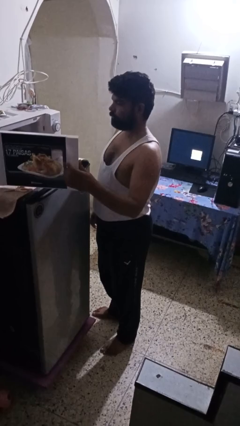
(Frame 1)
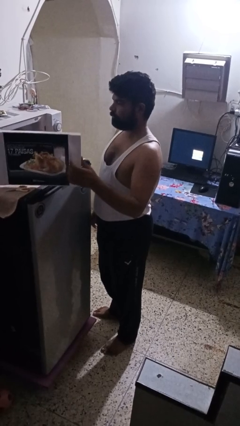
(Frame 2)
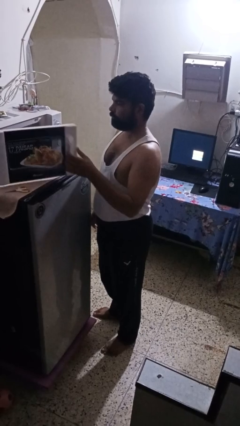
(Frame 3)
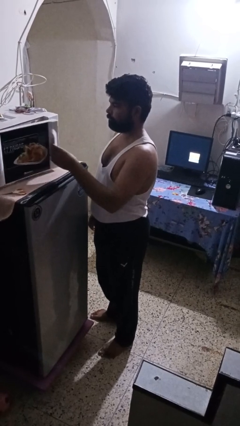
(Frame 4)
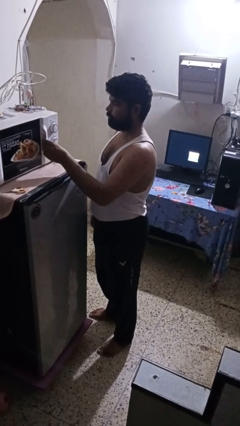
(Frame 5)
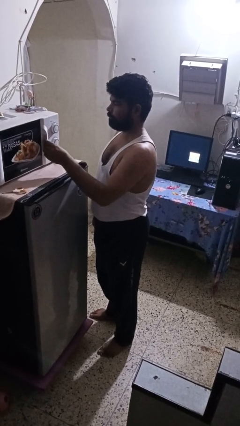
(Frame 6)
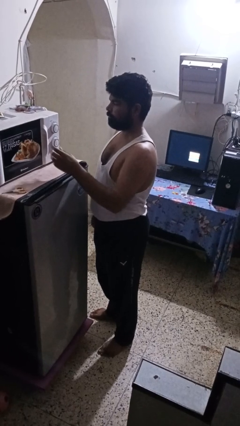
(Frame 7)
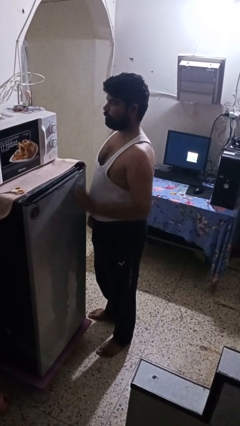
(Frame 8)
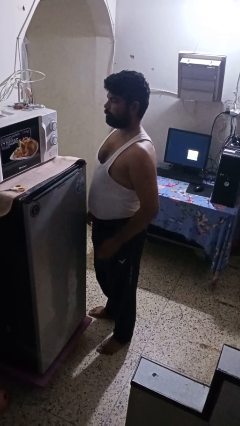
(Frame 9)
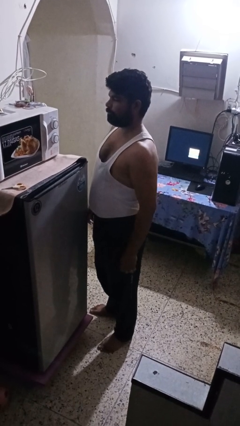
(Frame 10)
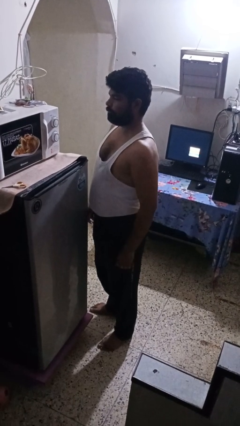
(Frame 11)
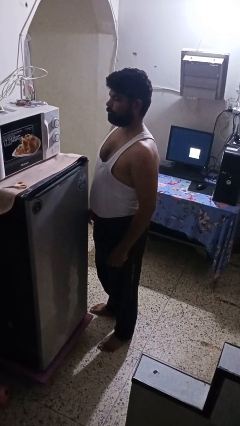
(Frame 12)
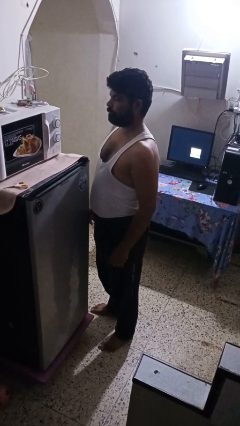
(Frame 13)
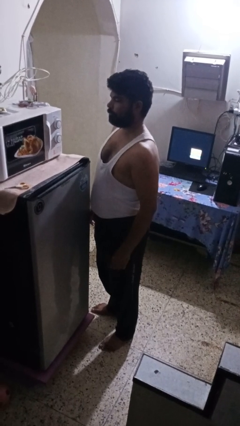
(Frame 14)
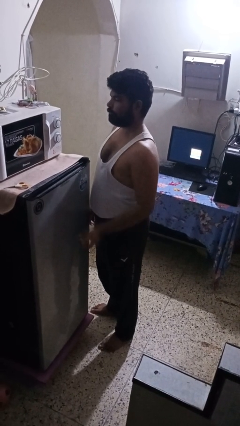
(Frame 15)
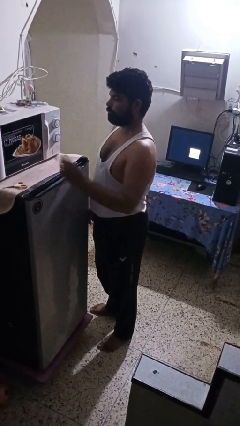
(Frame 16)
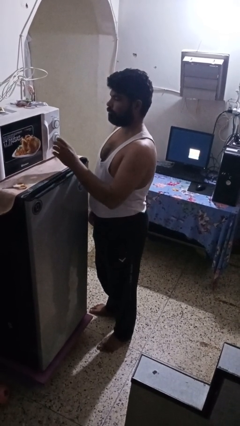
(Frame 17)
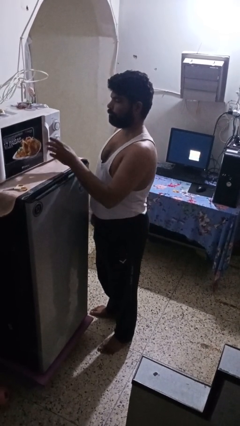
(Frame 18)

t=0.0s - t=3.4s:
person closes microwave

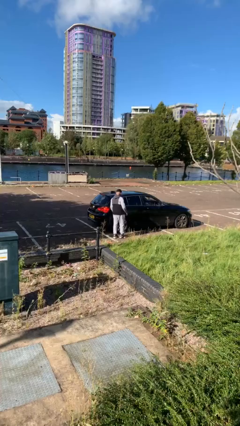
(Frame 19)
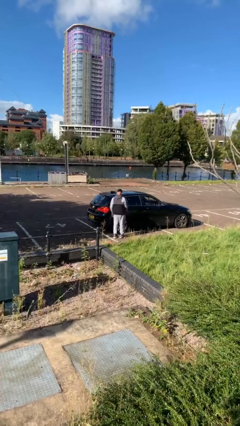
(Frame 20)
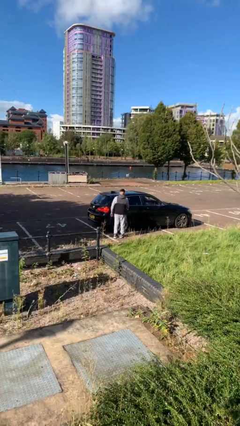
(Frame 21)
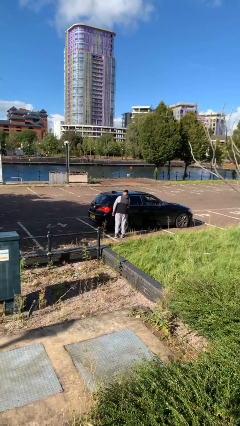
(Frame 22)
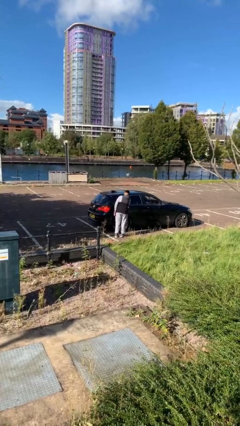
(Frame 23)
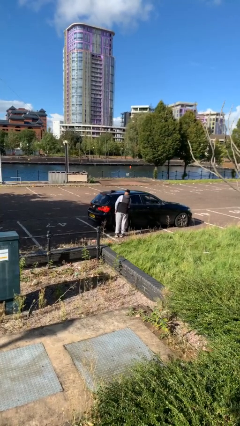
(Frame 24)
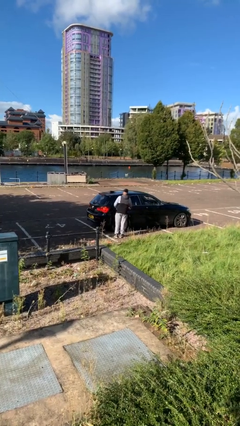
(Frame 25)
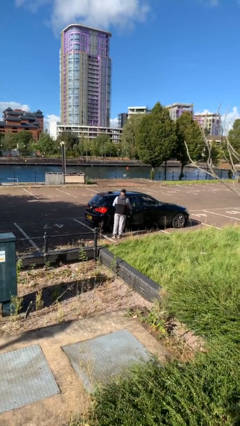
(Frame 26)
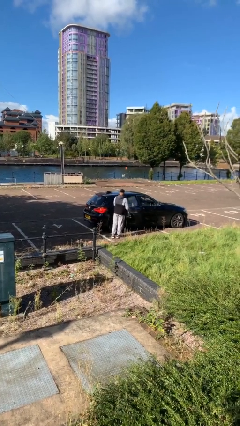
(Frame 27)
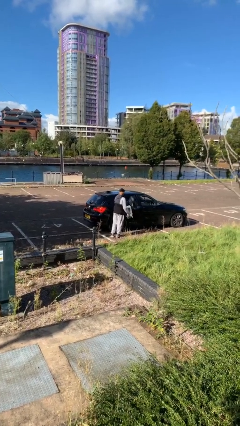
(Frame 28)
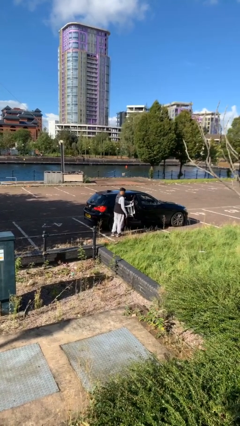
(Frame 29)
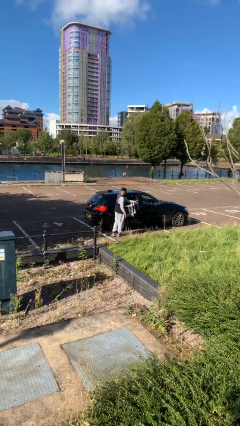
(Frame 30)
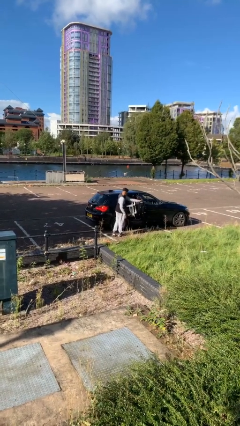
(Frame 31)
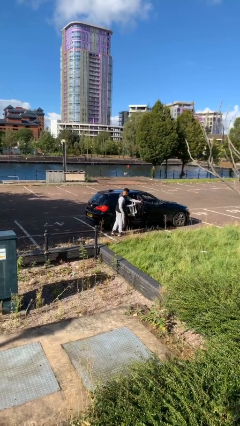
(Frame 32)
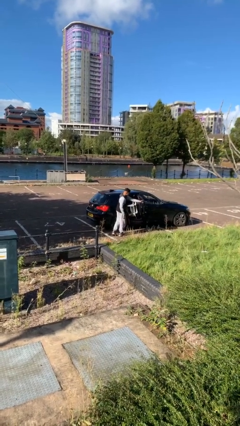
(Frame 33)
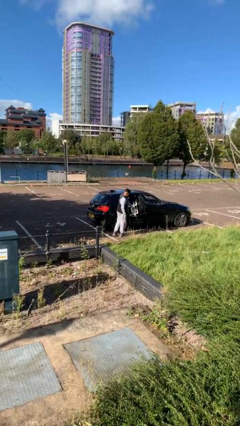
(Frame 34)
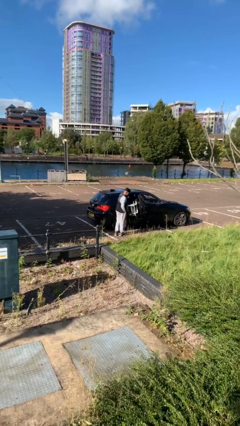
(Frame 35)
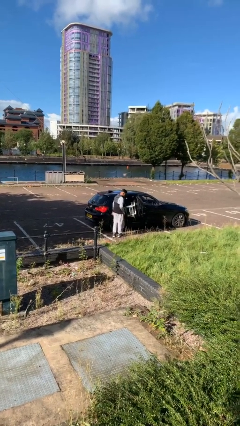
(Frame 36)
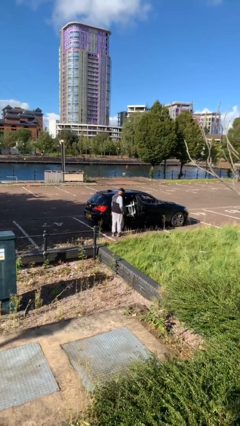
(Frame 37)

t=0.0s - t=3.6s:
person opens car door

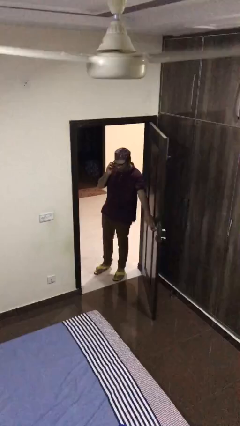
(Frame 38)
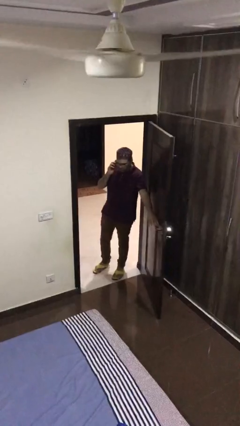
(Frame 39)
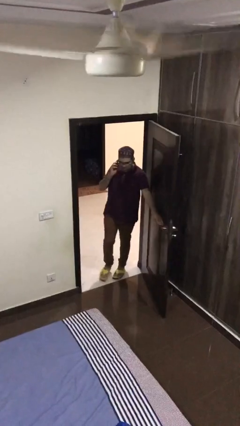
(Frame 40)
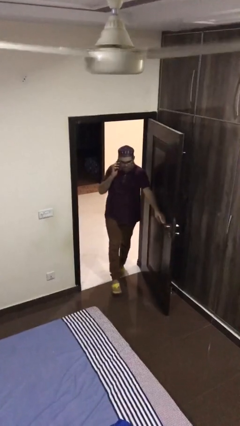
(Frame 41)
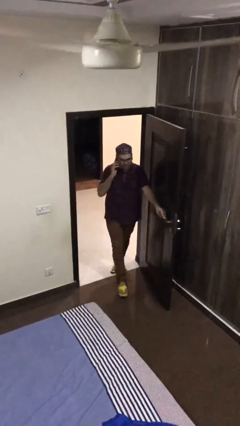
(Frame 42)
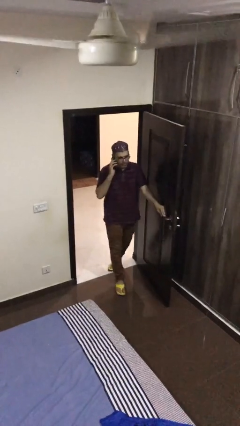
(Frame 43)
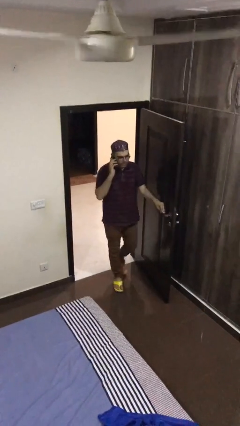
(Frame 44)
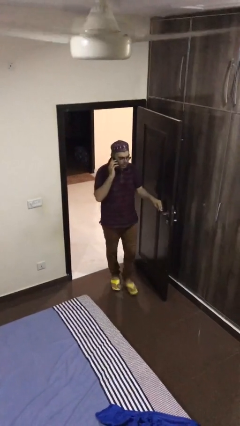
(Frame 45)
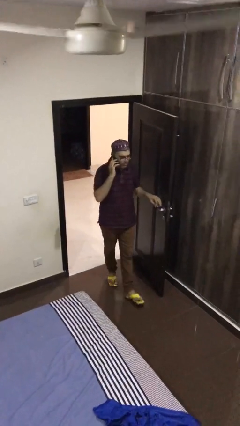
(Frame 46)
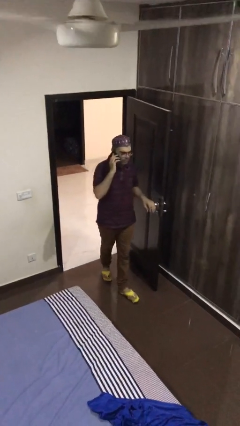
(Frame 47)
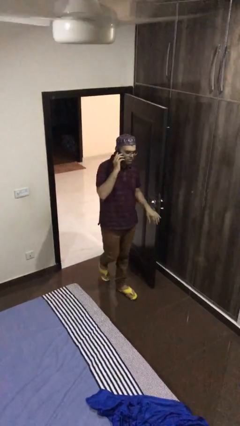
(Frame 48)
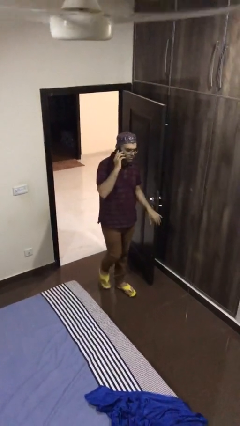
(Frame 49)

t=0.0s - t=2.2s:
person enters scene through structure

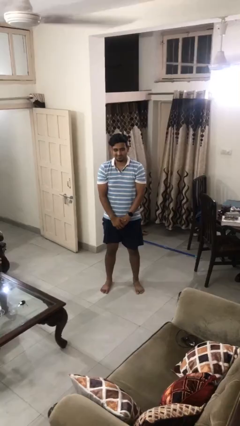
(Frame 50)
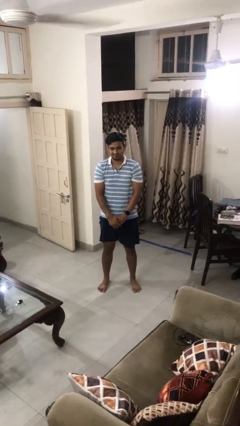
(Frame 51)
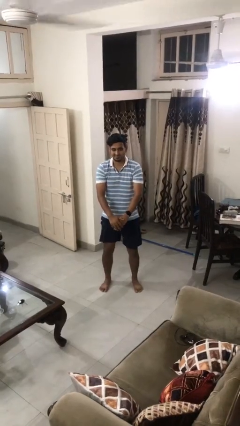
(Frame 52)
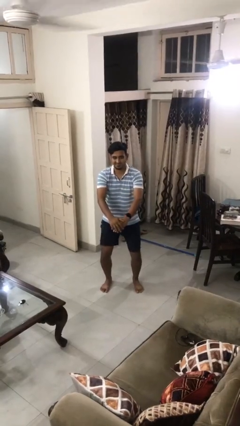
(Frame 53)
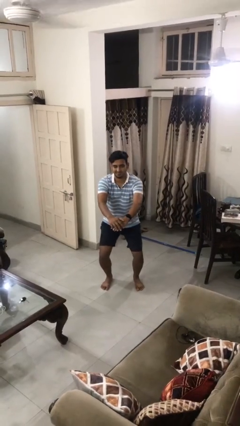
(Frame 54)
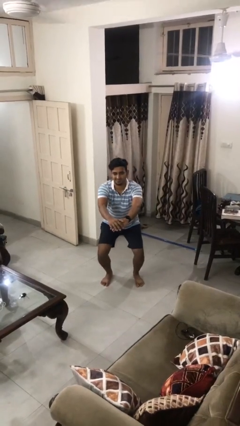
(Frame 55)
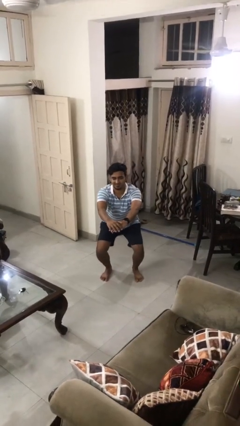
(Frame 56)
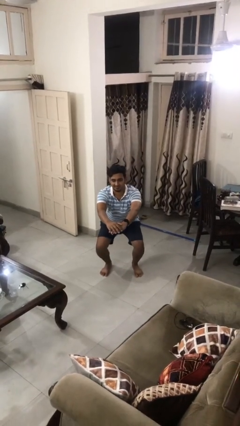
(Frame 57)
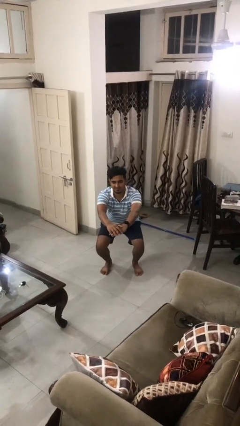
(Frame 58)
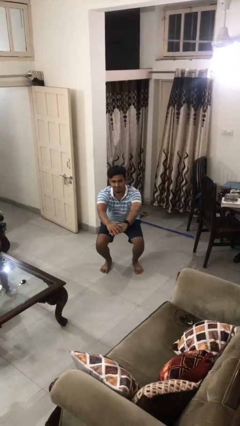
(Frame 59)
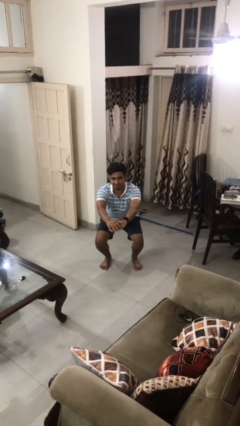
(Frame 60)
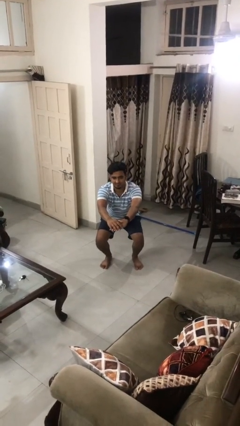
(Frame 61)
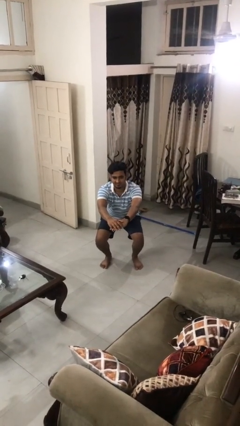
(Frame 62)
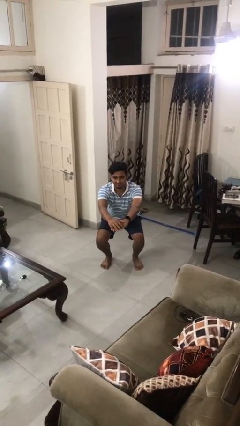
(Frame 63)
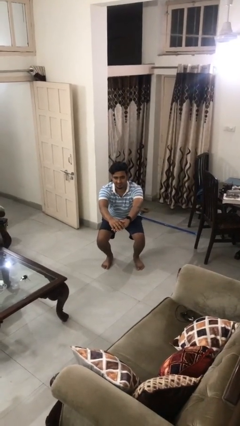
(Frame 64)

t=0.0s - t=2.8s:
person squats

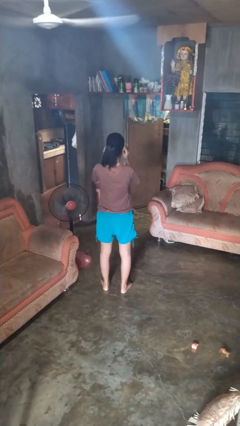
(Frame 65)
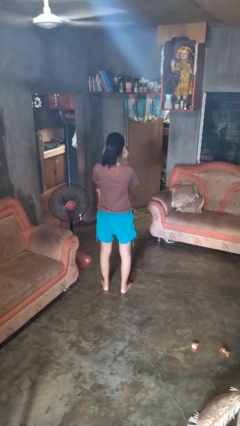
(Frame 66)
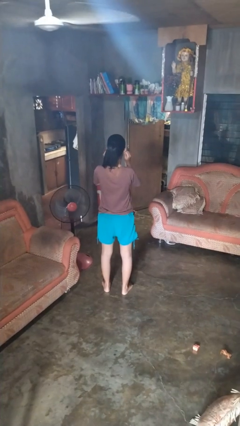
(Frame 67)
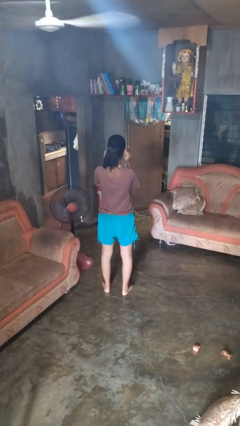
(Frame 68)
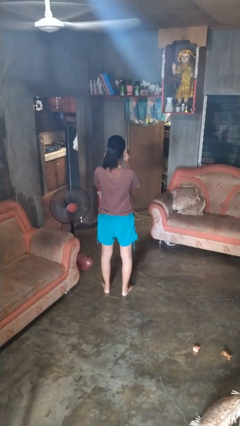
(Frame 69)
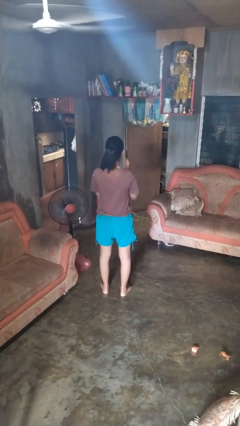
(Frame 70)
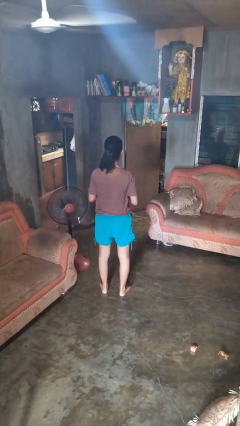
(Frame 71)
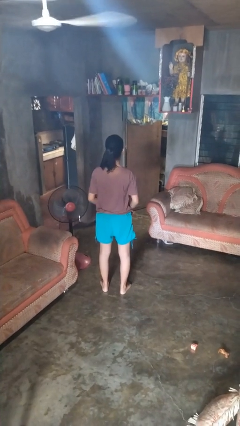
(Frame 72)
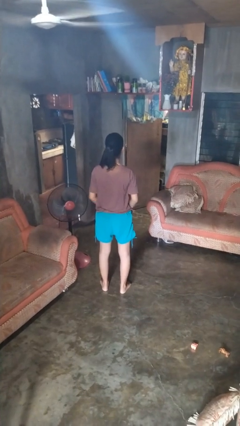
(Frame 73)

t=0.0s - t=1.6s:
person touches earlobe

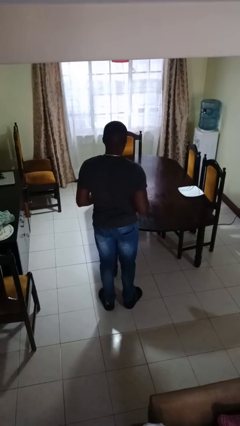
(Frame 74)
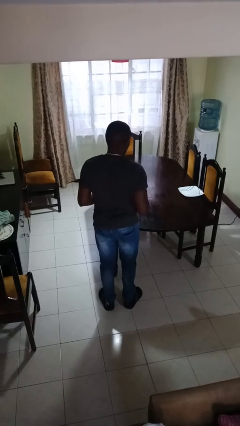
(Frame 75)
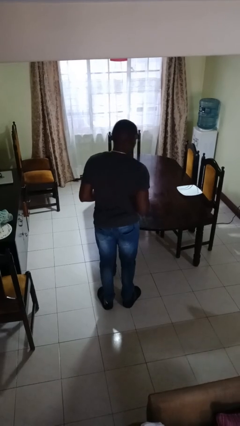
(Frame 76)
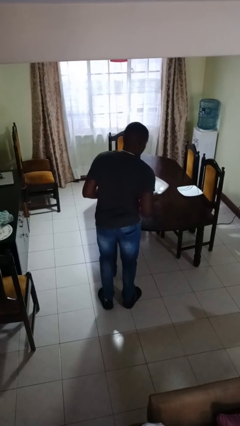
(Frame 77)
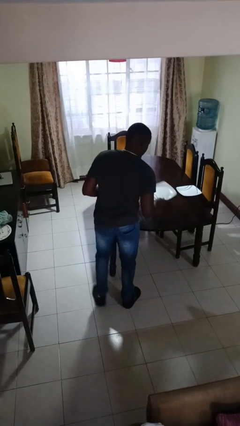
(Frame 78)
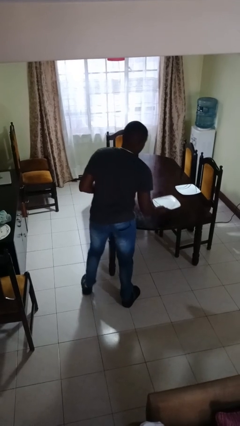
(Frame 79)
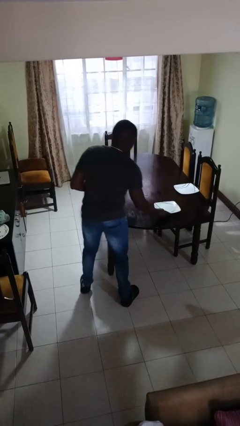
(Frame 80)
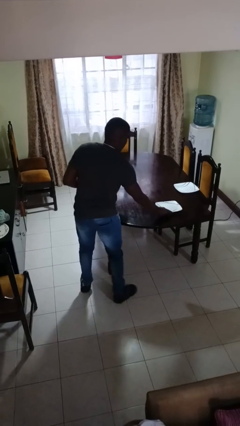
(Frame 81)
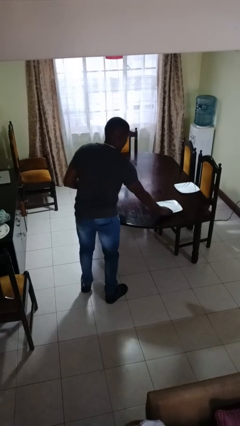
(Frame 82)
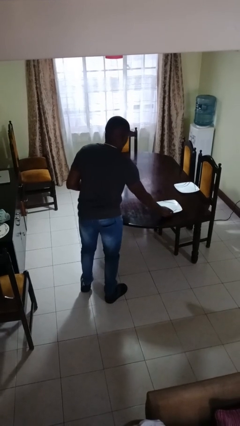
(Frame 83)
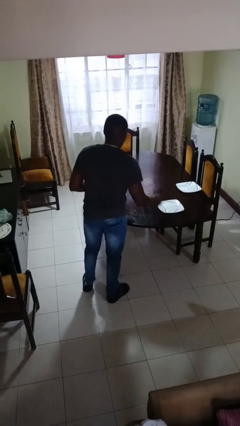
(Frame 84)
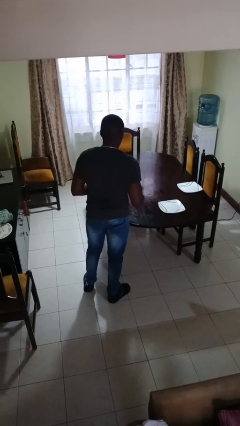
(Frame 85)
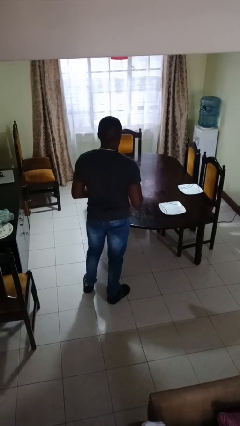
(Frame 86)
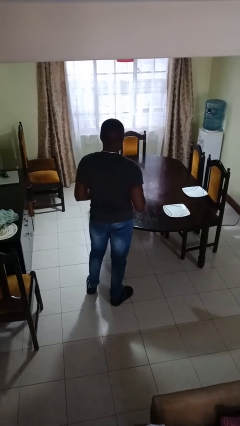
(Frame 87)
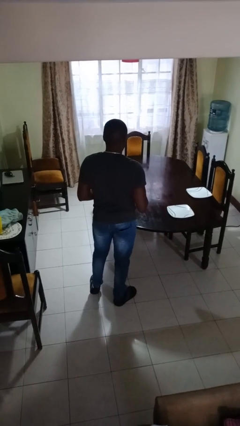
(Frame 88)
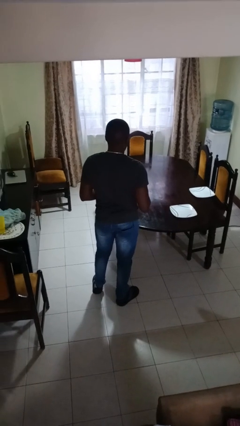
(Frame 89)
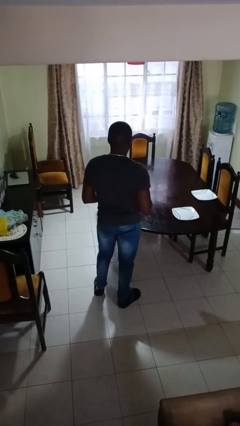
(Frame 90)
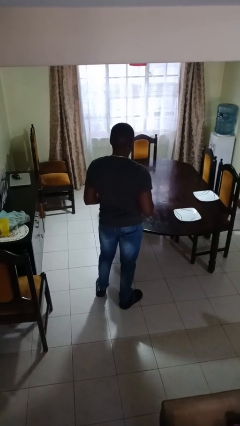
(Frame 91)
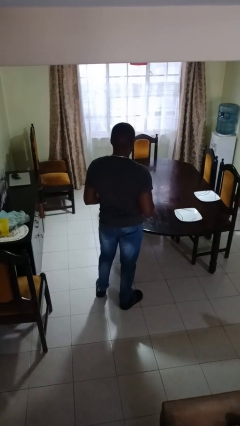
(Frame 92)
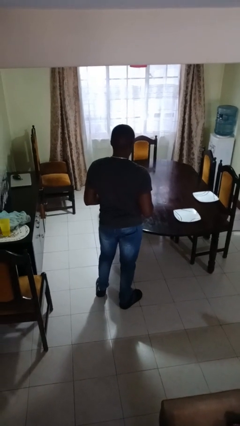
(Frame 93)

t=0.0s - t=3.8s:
person sets table
